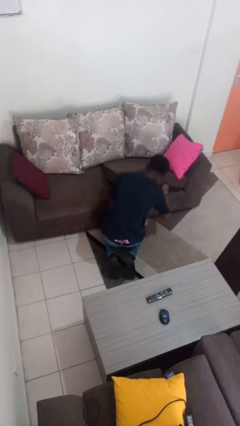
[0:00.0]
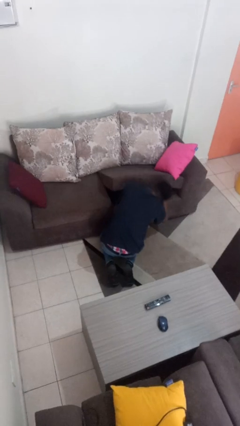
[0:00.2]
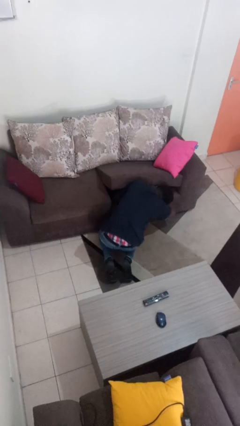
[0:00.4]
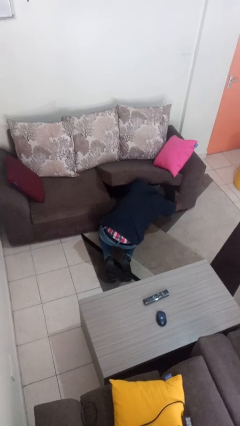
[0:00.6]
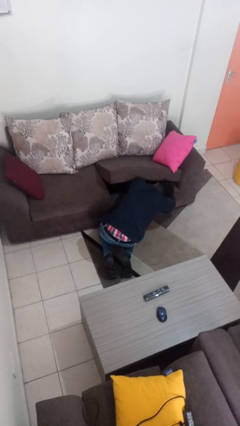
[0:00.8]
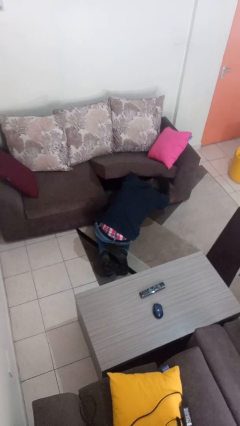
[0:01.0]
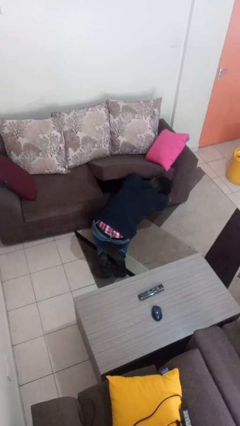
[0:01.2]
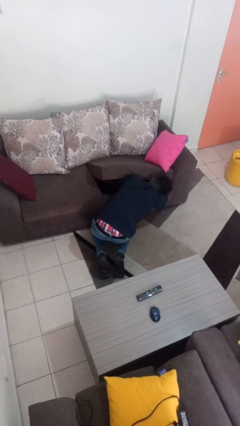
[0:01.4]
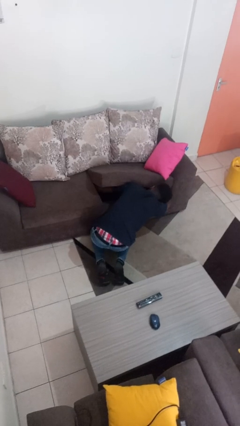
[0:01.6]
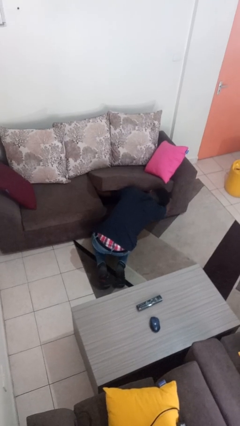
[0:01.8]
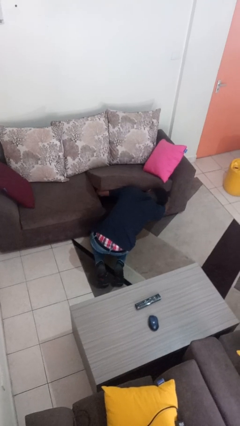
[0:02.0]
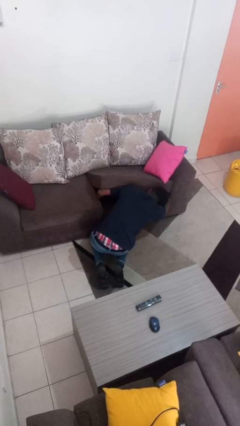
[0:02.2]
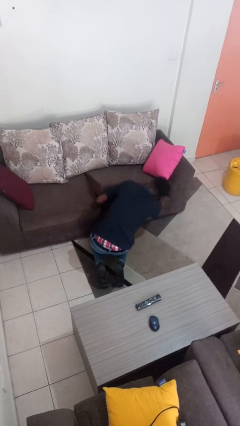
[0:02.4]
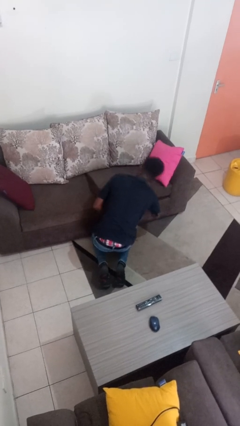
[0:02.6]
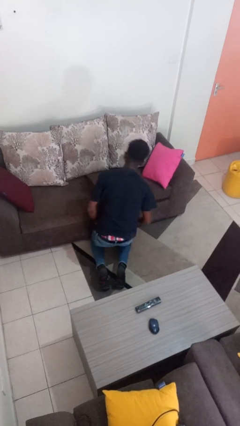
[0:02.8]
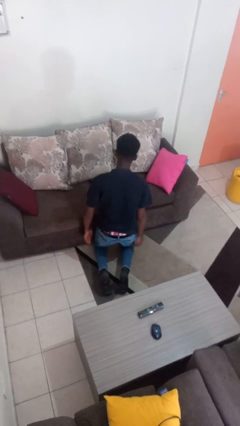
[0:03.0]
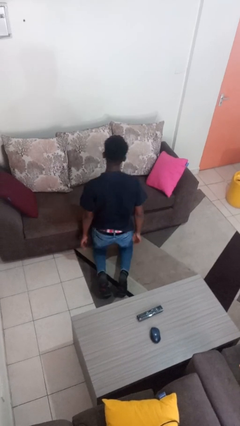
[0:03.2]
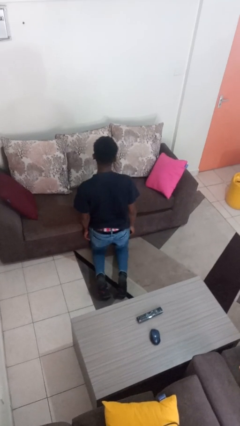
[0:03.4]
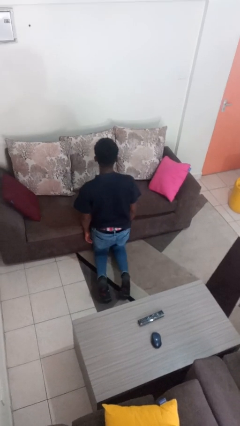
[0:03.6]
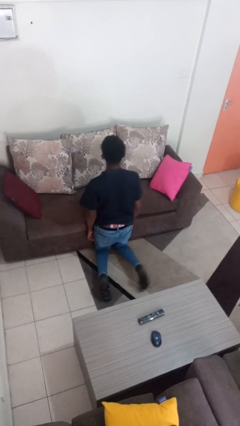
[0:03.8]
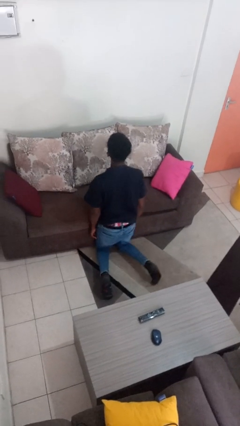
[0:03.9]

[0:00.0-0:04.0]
person searches under couch

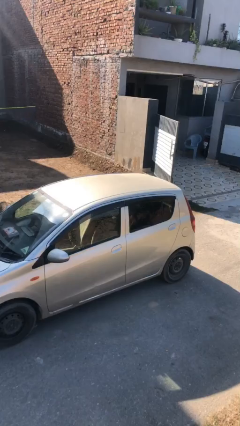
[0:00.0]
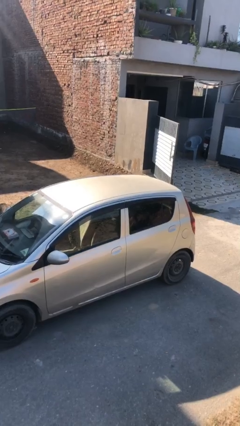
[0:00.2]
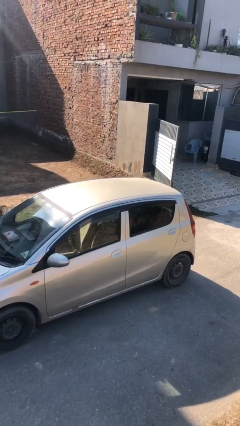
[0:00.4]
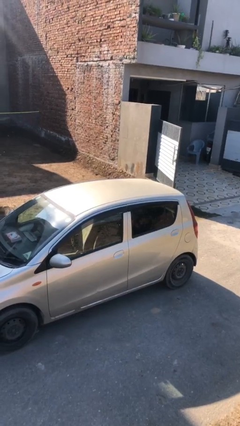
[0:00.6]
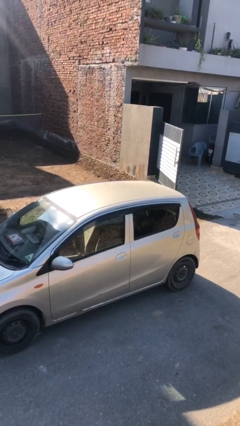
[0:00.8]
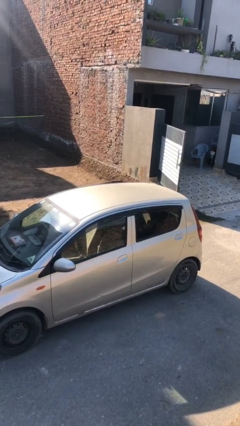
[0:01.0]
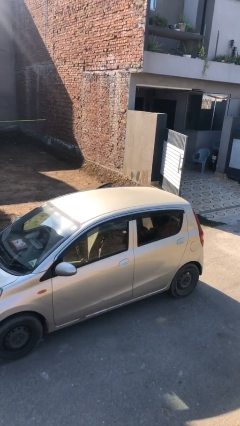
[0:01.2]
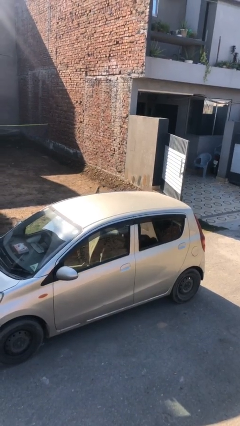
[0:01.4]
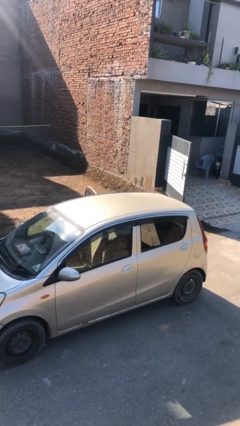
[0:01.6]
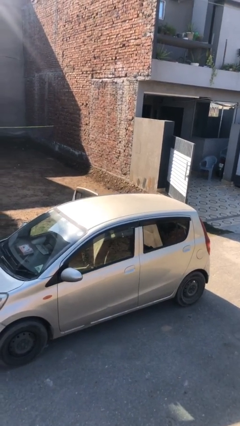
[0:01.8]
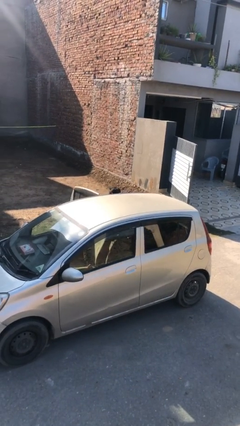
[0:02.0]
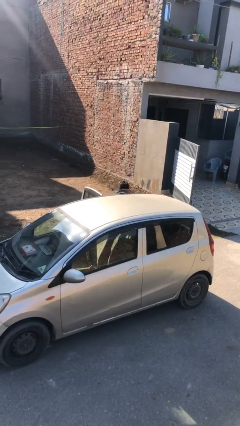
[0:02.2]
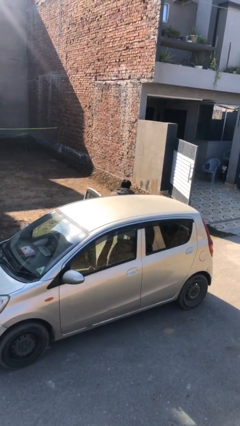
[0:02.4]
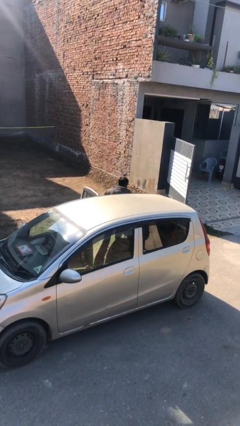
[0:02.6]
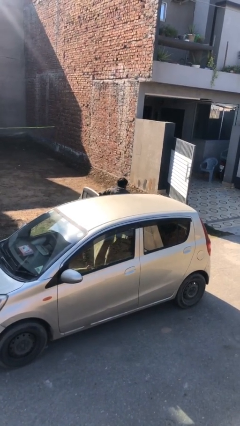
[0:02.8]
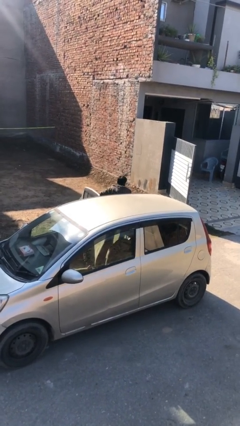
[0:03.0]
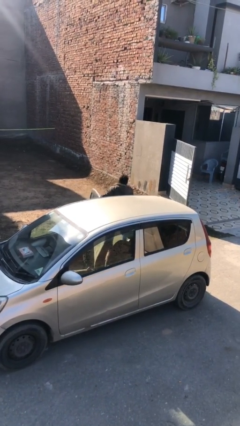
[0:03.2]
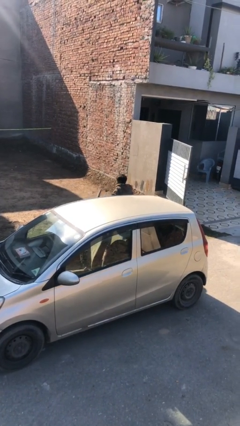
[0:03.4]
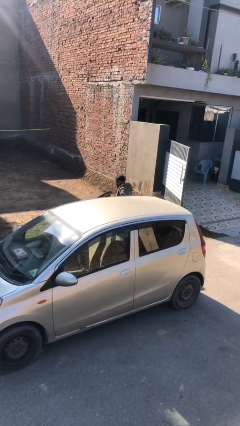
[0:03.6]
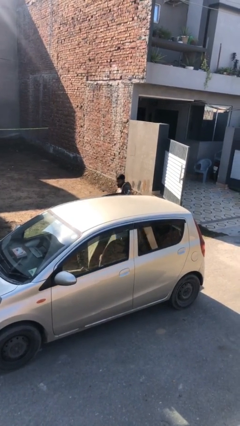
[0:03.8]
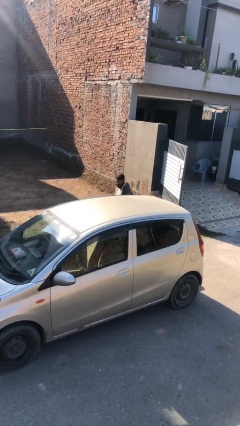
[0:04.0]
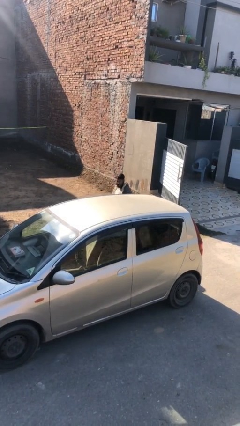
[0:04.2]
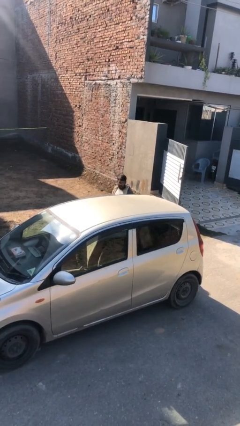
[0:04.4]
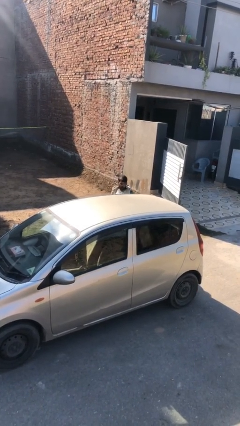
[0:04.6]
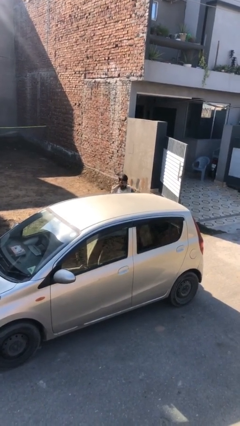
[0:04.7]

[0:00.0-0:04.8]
car drops off person

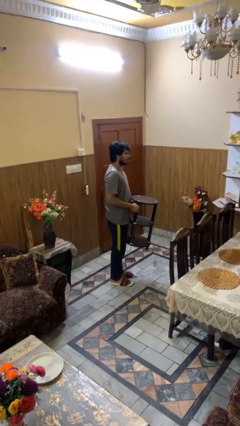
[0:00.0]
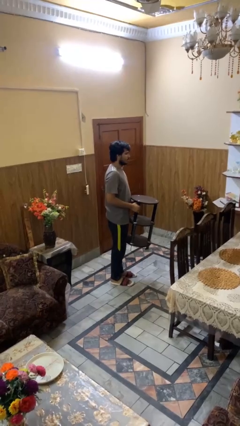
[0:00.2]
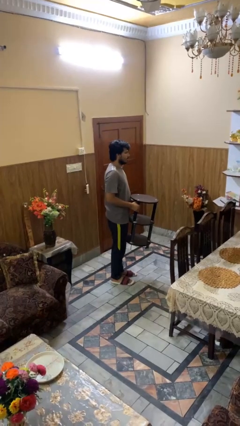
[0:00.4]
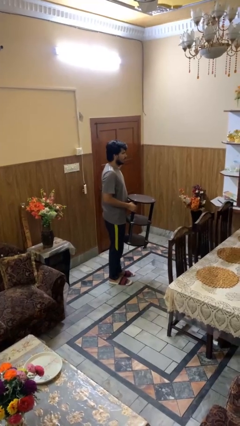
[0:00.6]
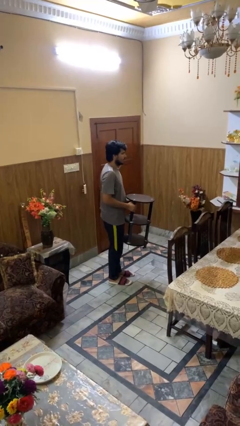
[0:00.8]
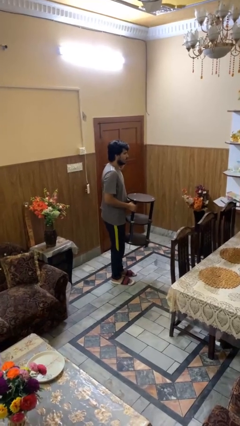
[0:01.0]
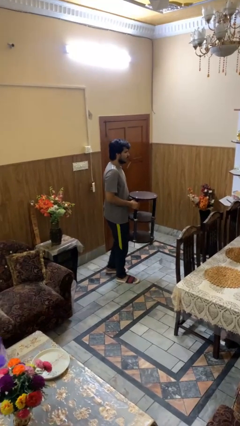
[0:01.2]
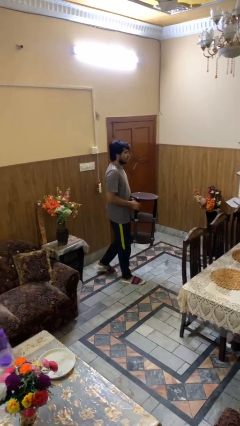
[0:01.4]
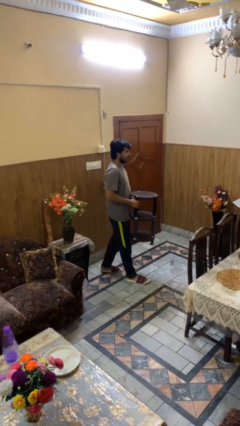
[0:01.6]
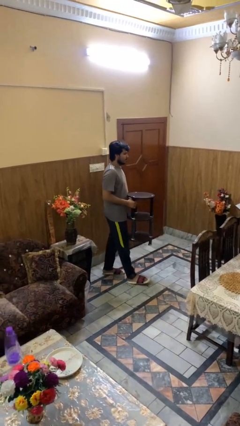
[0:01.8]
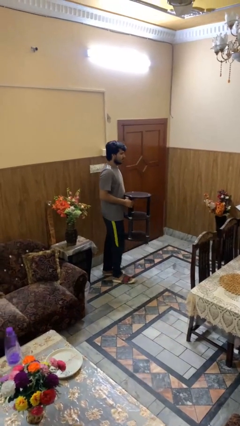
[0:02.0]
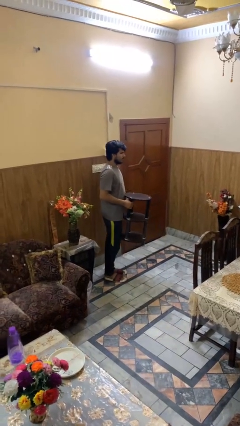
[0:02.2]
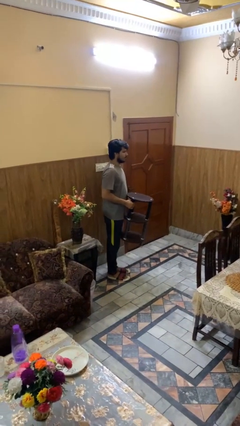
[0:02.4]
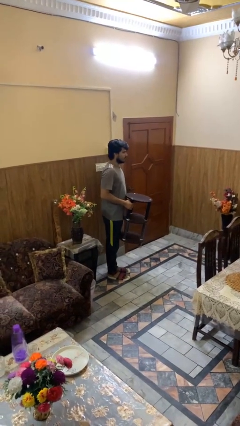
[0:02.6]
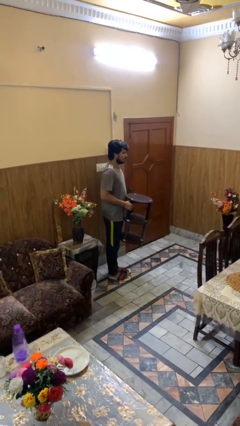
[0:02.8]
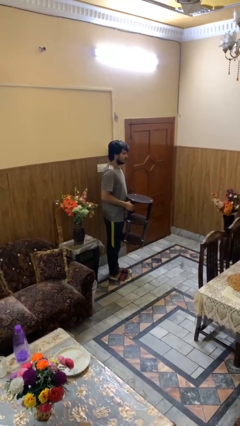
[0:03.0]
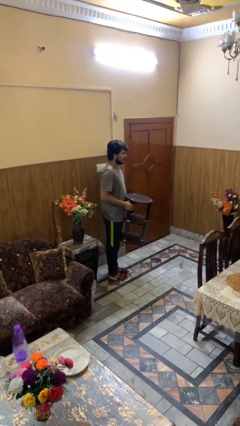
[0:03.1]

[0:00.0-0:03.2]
person carries furniture

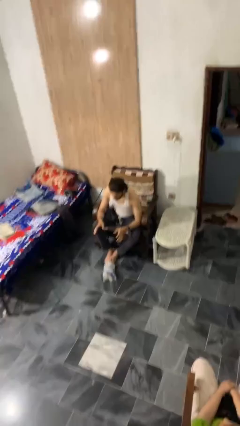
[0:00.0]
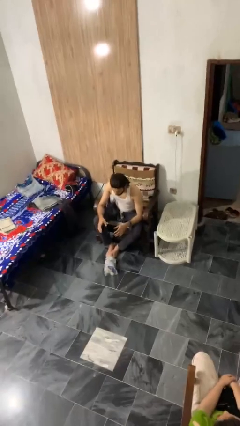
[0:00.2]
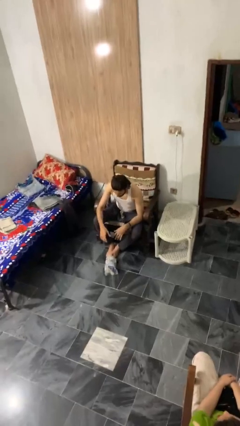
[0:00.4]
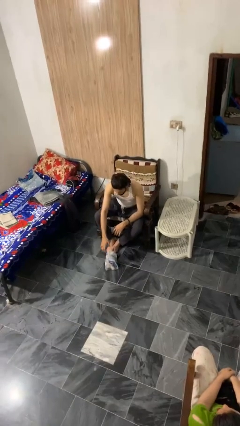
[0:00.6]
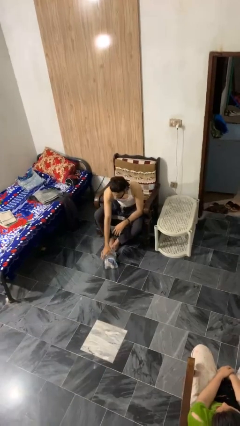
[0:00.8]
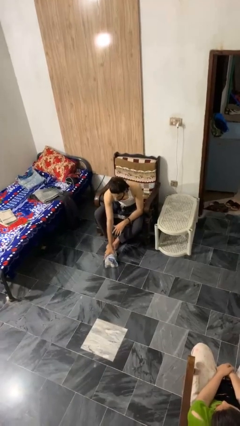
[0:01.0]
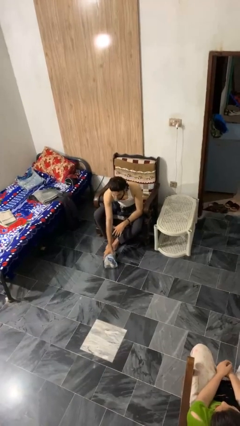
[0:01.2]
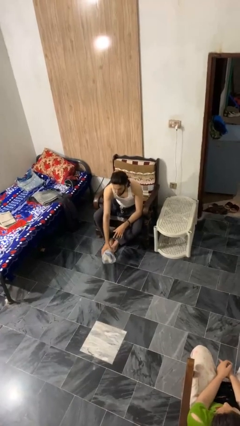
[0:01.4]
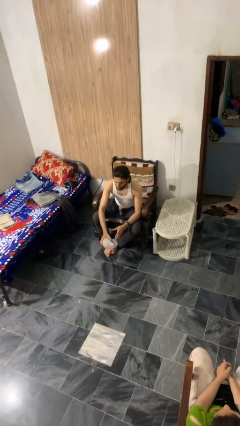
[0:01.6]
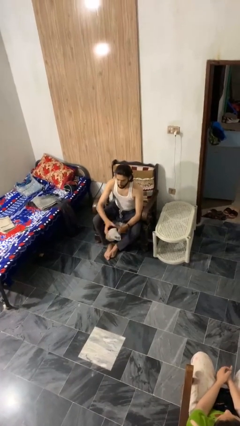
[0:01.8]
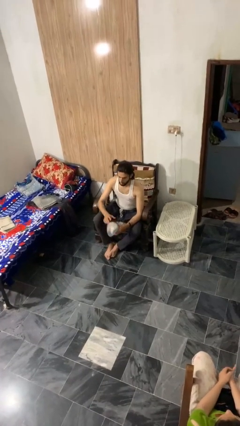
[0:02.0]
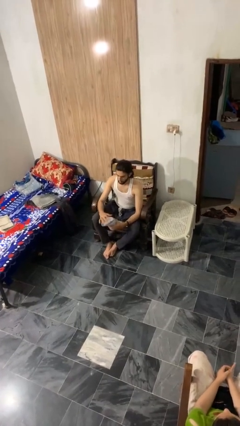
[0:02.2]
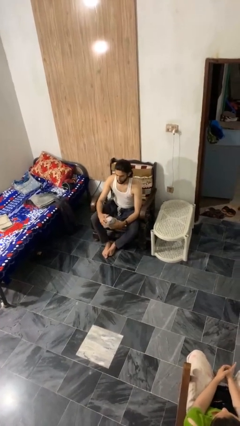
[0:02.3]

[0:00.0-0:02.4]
person picks up object from floor

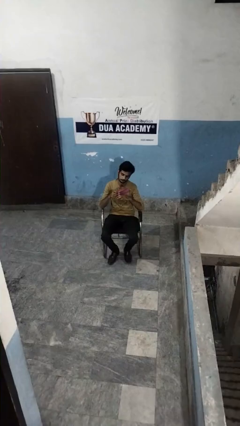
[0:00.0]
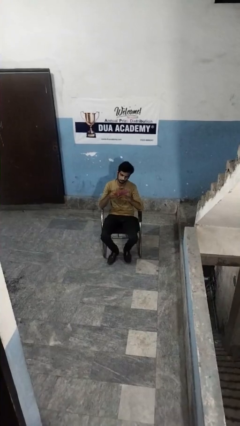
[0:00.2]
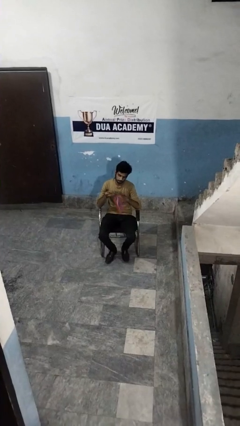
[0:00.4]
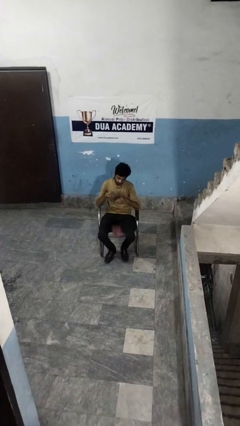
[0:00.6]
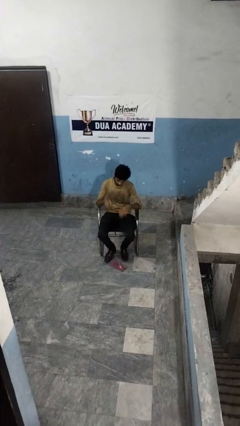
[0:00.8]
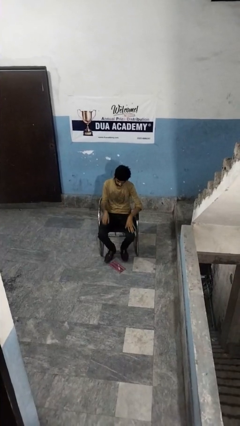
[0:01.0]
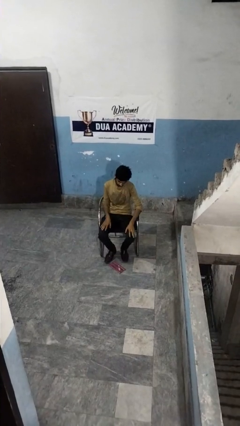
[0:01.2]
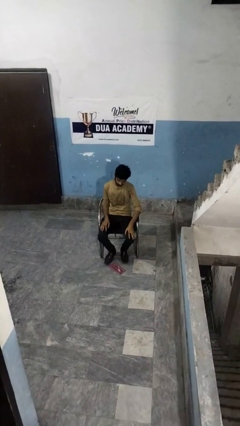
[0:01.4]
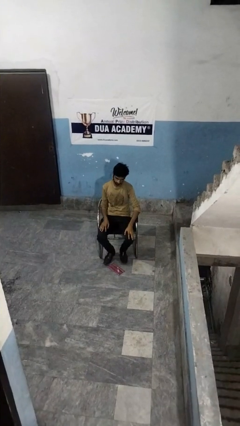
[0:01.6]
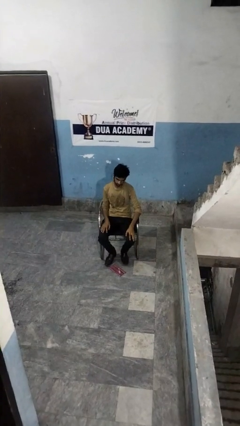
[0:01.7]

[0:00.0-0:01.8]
person drops object

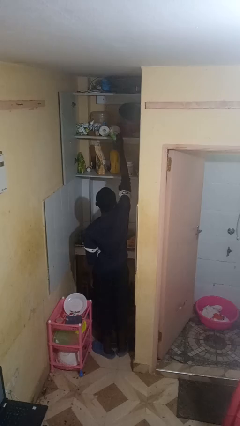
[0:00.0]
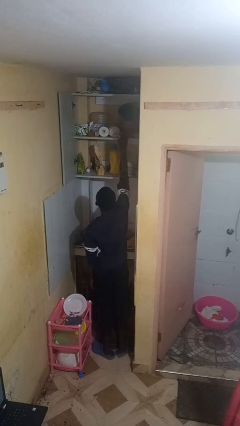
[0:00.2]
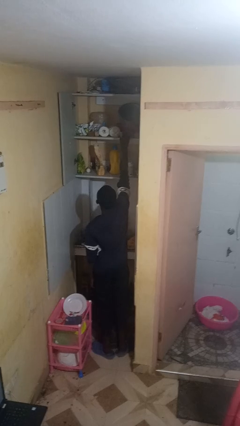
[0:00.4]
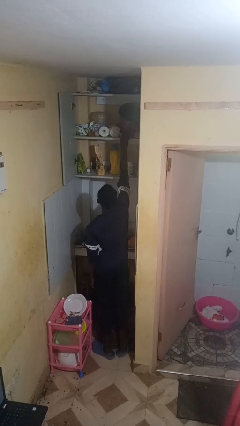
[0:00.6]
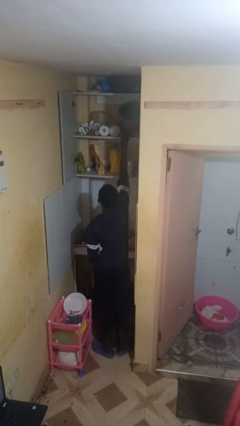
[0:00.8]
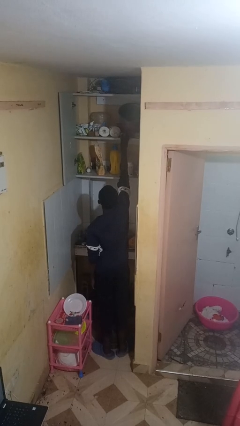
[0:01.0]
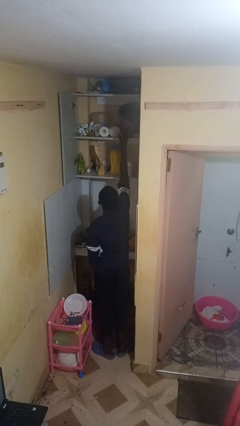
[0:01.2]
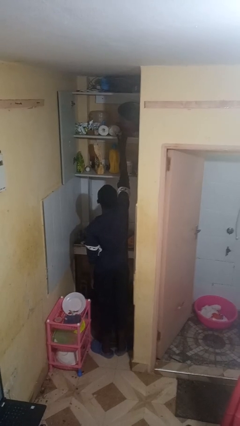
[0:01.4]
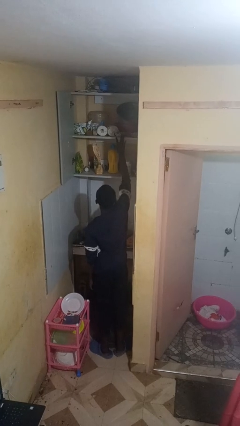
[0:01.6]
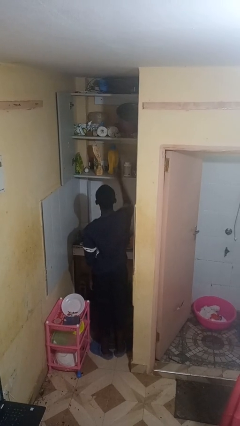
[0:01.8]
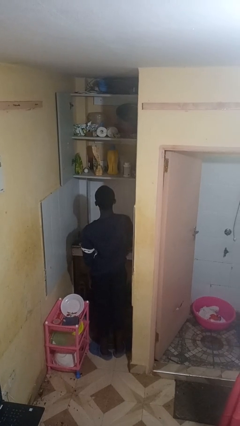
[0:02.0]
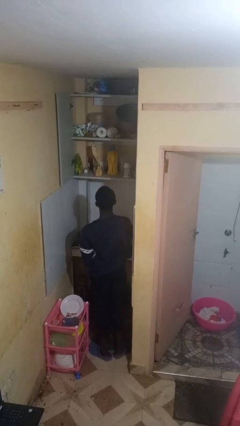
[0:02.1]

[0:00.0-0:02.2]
person puts object in cabinet
